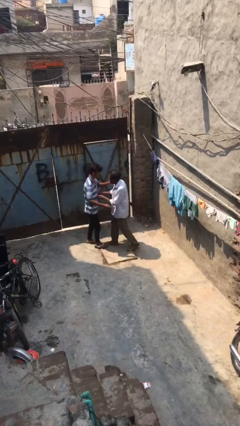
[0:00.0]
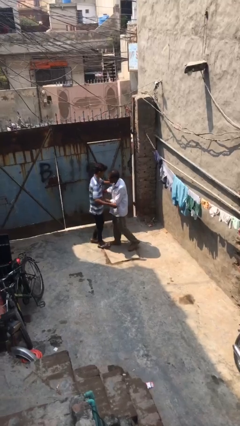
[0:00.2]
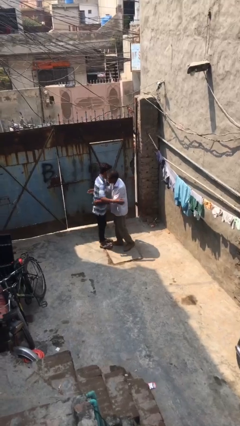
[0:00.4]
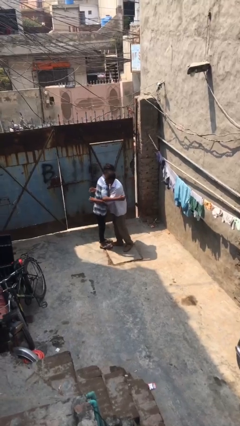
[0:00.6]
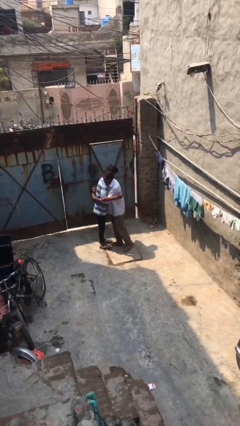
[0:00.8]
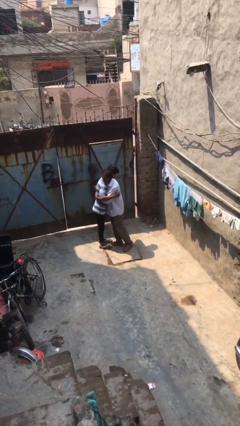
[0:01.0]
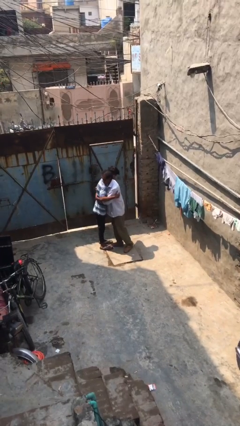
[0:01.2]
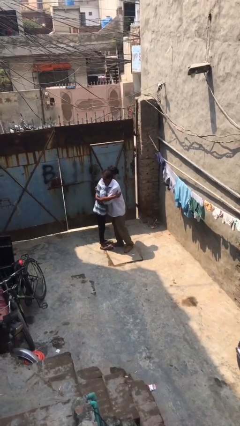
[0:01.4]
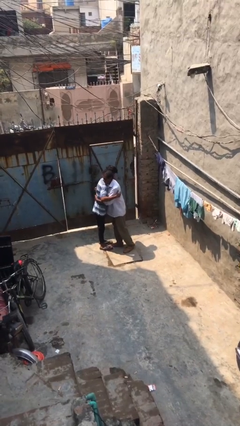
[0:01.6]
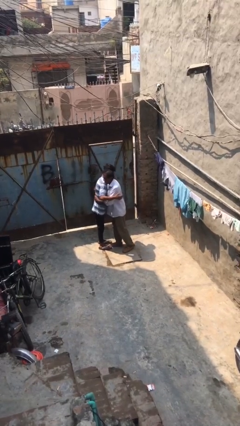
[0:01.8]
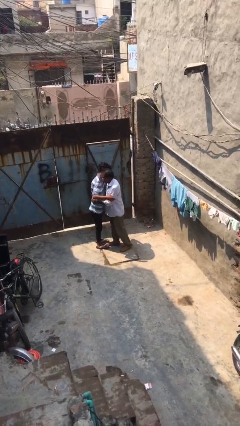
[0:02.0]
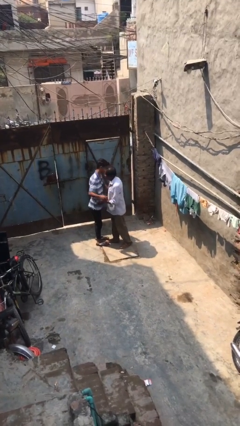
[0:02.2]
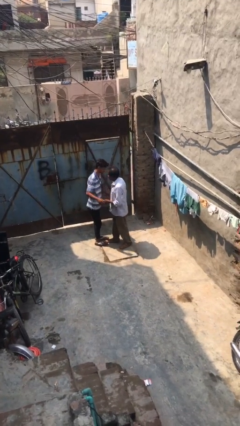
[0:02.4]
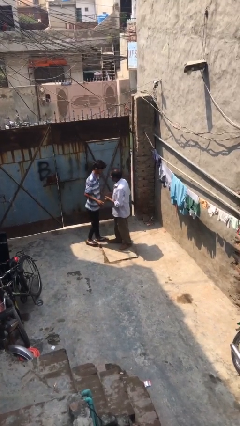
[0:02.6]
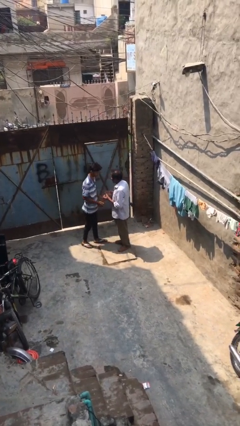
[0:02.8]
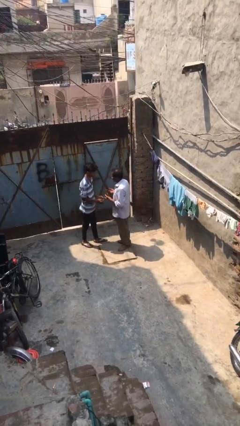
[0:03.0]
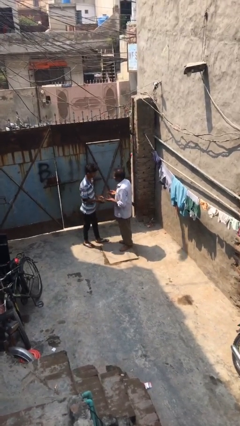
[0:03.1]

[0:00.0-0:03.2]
person embraces person

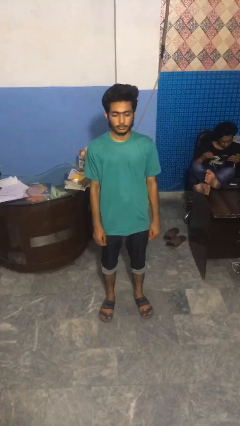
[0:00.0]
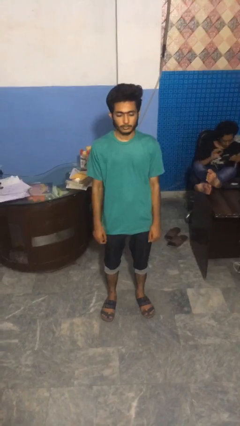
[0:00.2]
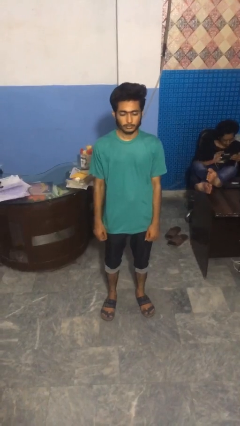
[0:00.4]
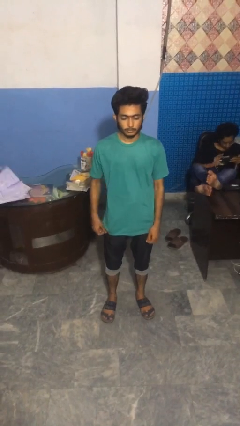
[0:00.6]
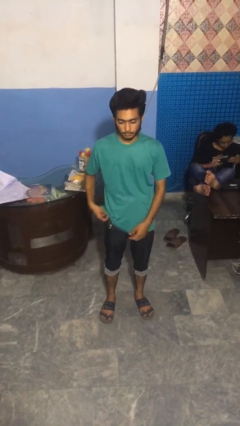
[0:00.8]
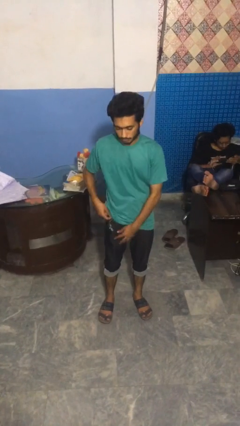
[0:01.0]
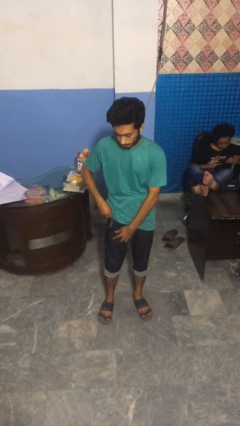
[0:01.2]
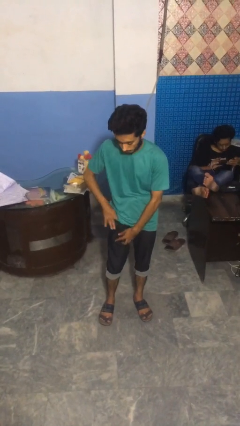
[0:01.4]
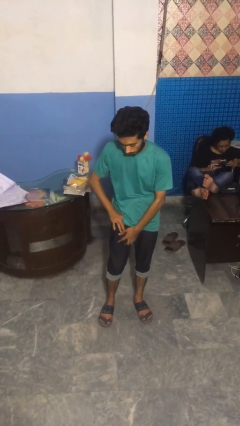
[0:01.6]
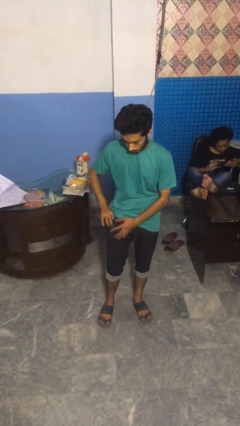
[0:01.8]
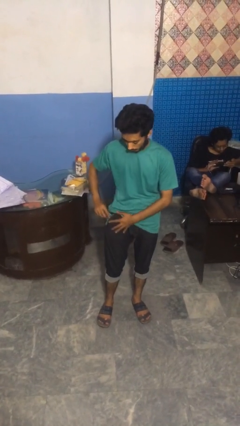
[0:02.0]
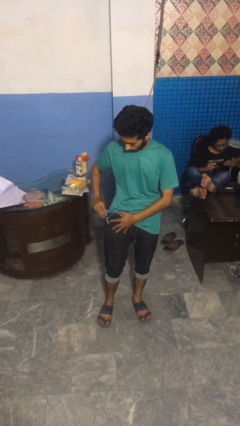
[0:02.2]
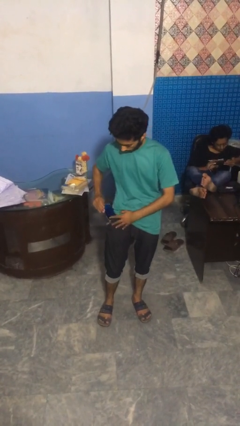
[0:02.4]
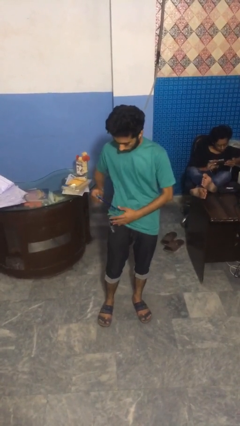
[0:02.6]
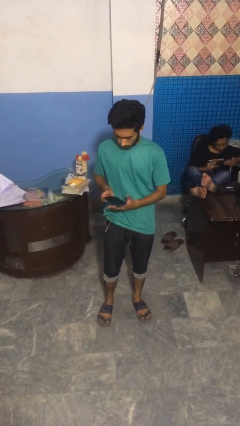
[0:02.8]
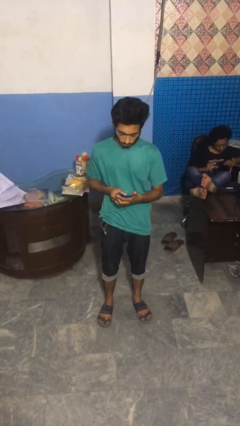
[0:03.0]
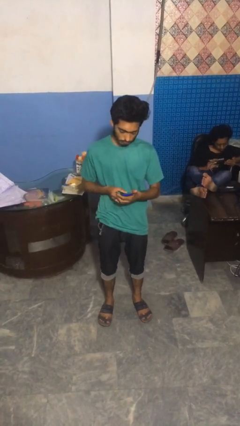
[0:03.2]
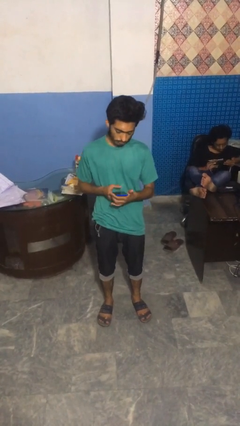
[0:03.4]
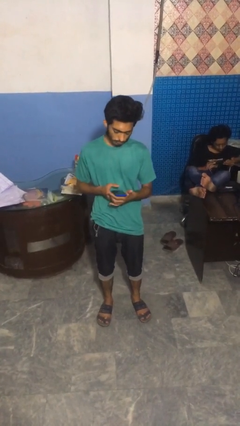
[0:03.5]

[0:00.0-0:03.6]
person takes phone from pocket

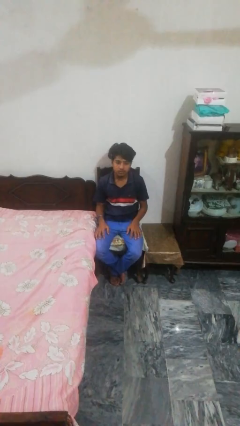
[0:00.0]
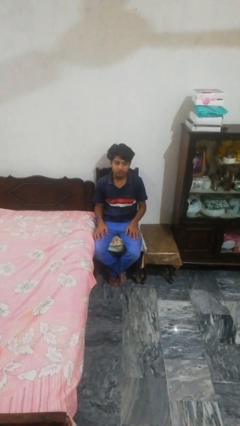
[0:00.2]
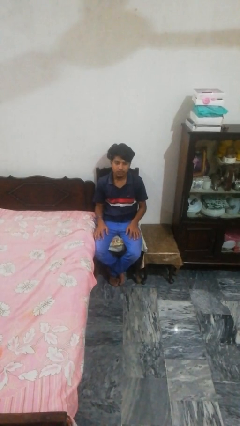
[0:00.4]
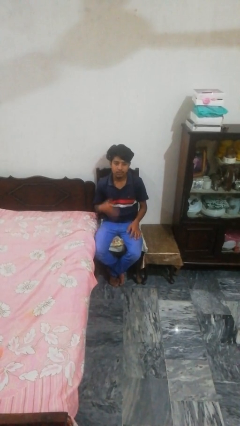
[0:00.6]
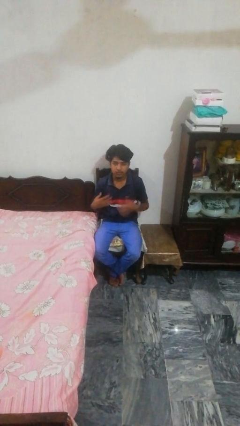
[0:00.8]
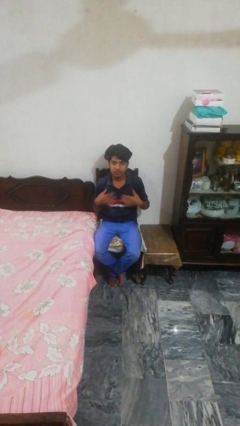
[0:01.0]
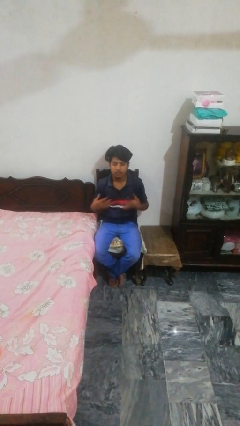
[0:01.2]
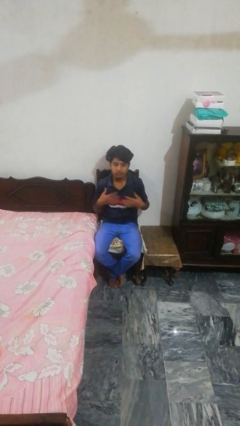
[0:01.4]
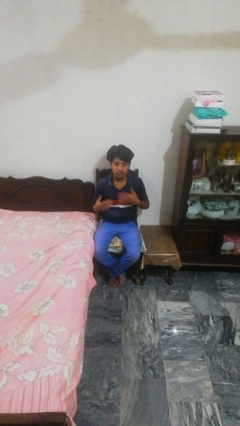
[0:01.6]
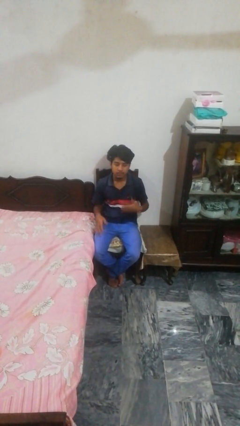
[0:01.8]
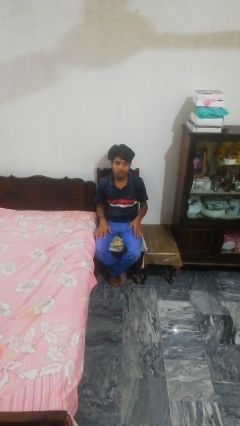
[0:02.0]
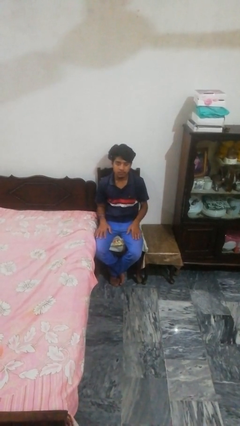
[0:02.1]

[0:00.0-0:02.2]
person drums on chest

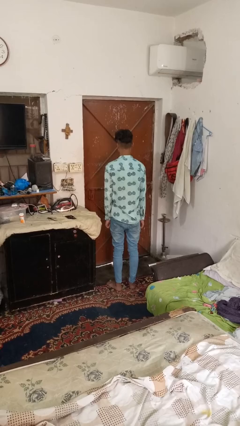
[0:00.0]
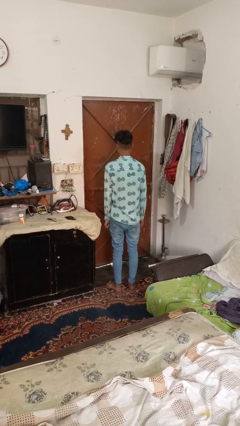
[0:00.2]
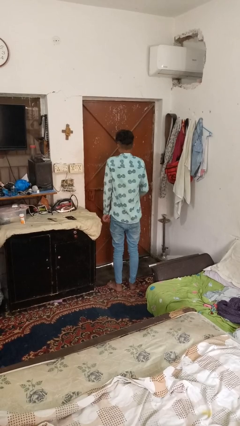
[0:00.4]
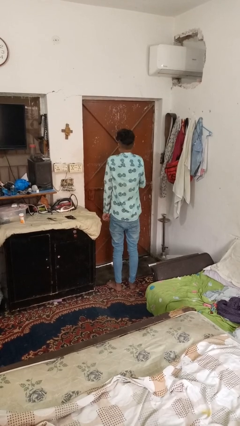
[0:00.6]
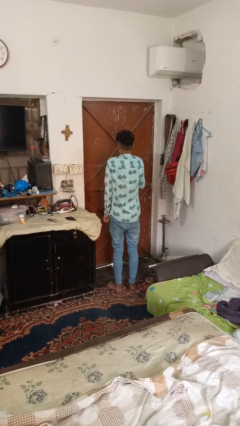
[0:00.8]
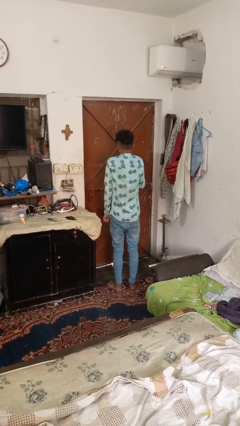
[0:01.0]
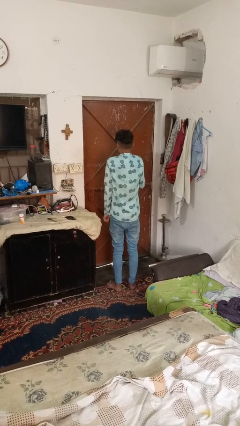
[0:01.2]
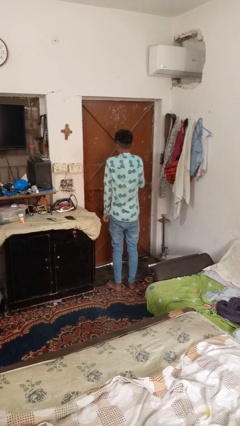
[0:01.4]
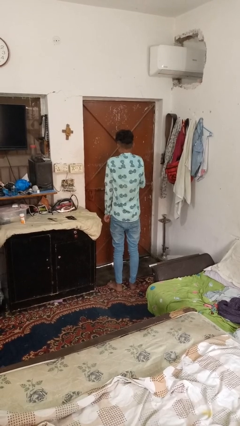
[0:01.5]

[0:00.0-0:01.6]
person shrugs

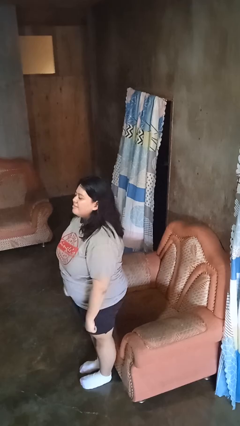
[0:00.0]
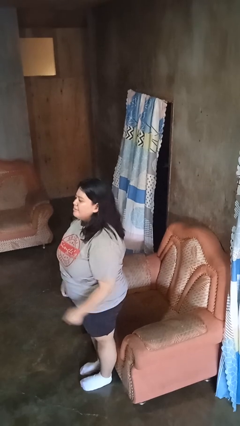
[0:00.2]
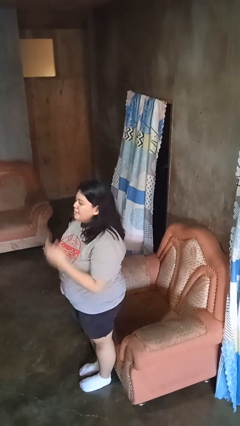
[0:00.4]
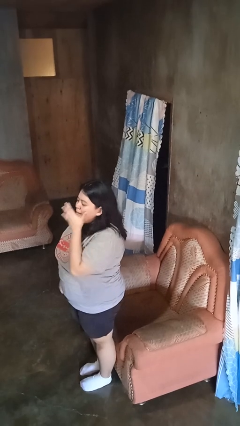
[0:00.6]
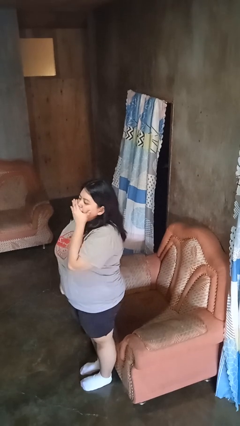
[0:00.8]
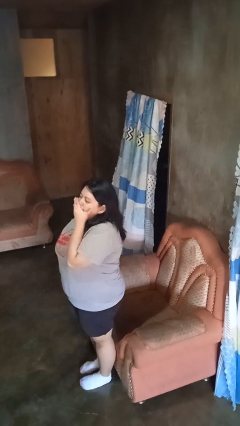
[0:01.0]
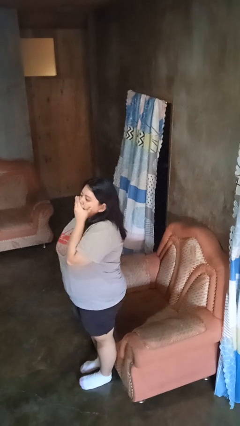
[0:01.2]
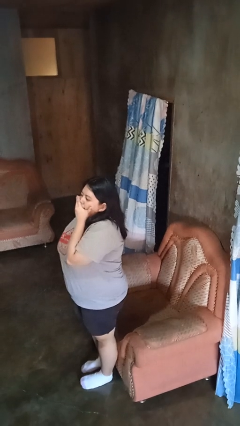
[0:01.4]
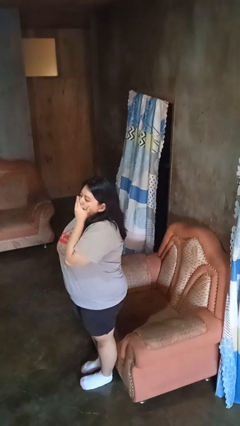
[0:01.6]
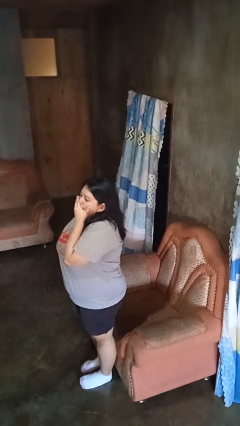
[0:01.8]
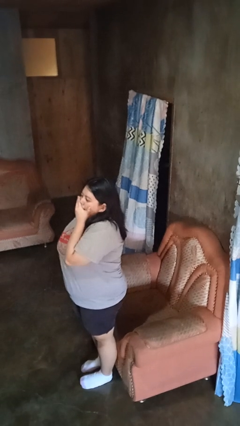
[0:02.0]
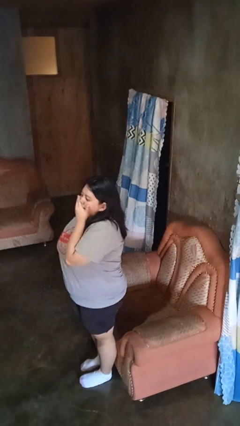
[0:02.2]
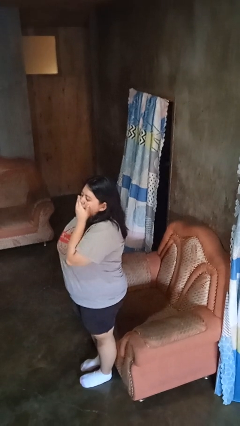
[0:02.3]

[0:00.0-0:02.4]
person yawns

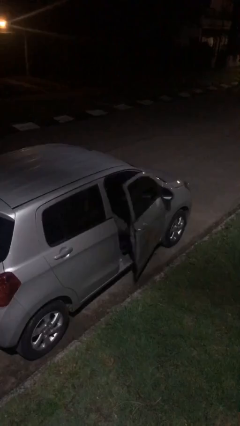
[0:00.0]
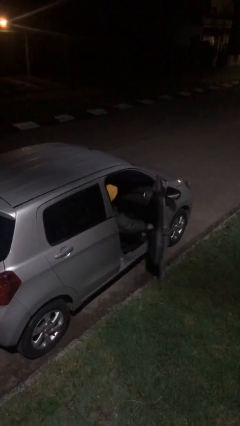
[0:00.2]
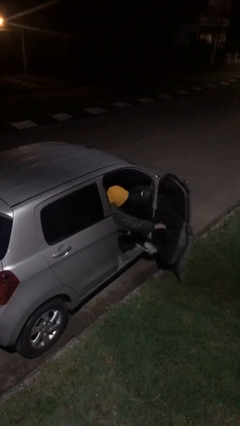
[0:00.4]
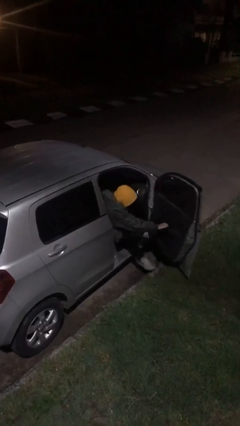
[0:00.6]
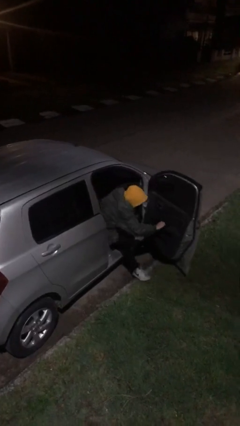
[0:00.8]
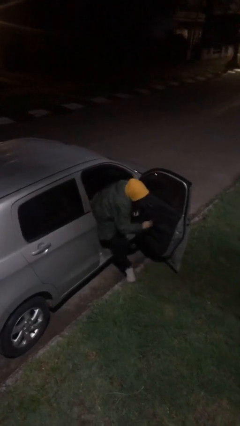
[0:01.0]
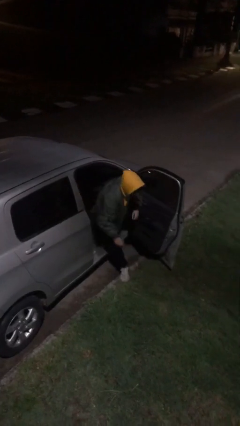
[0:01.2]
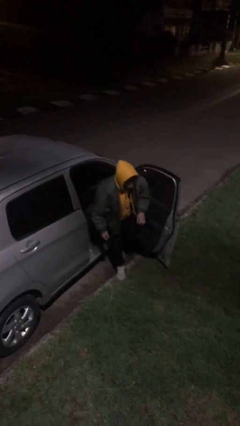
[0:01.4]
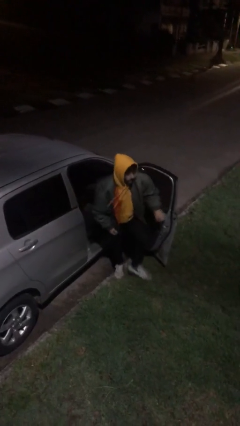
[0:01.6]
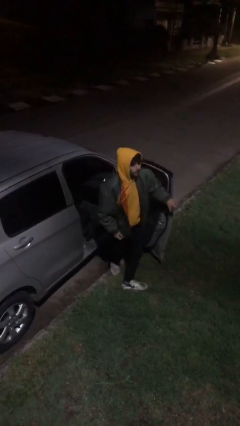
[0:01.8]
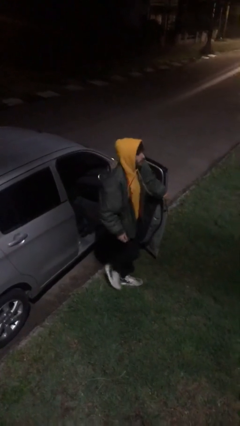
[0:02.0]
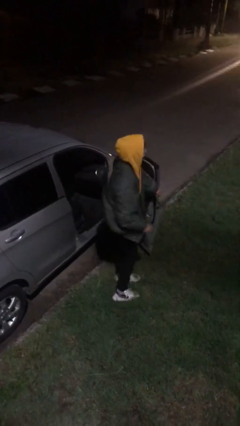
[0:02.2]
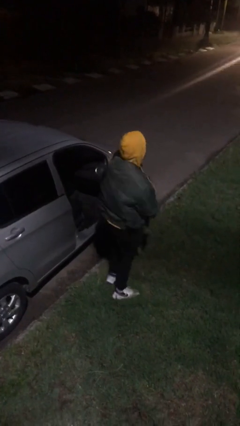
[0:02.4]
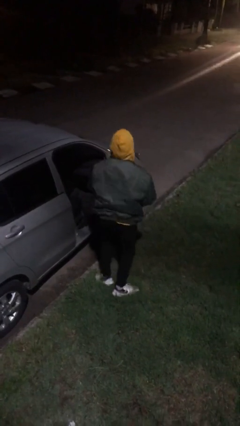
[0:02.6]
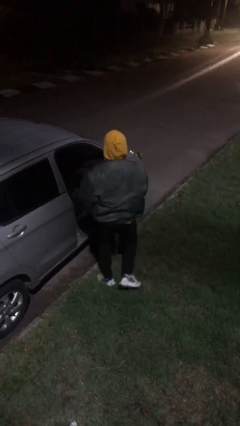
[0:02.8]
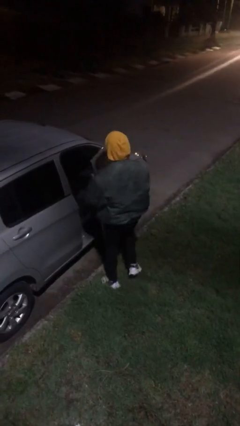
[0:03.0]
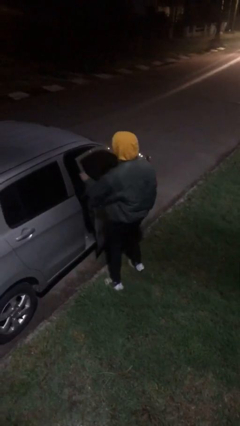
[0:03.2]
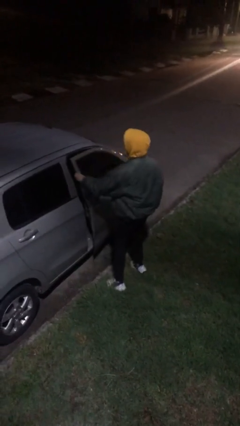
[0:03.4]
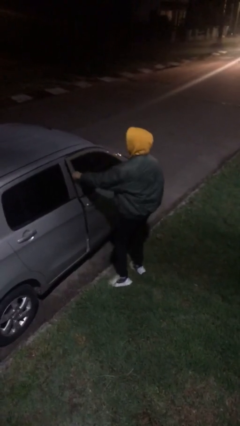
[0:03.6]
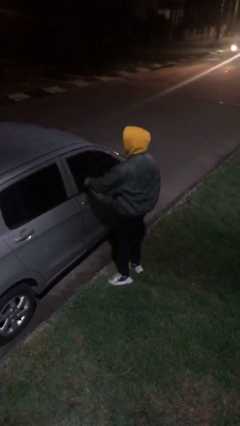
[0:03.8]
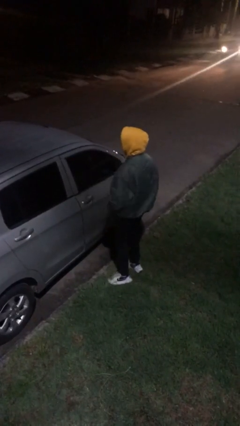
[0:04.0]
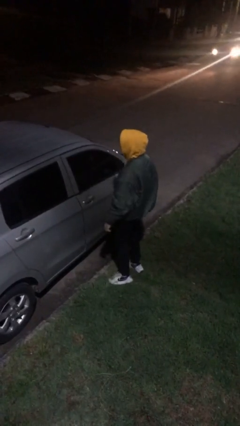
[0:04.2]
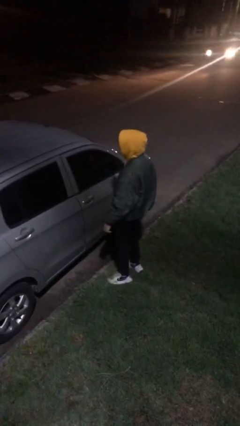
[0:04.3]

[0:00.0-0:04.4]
car drops off person

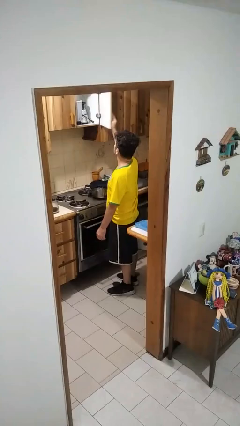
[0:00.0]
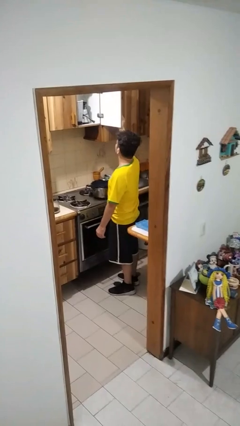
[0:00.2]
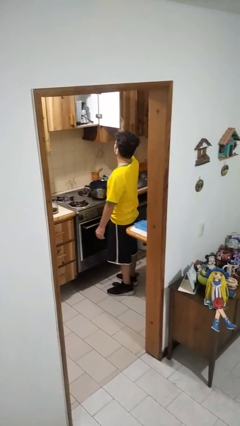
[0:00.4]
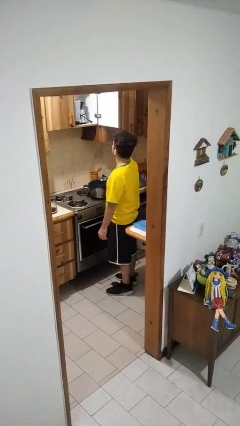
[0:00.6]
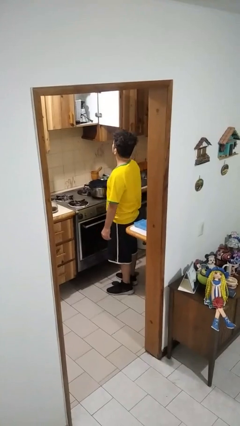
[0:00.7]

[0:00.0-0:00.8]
person opens cabinet
